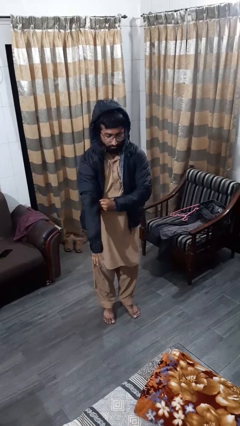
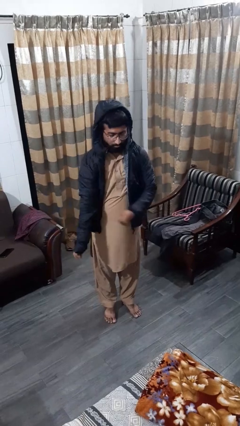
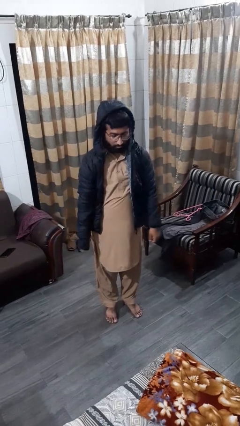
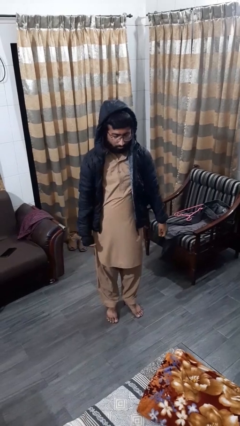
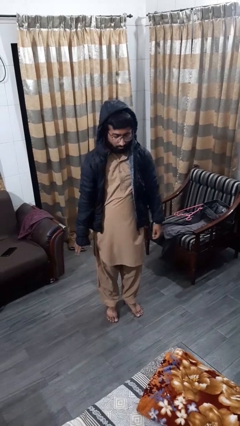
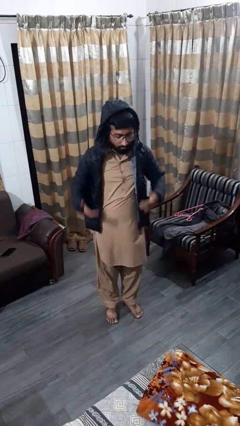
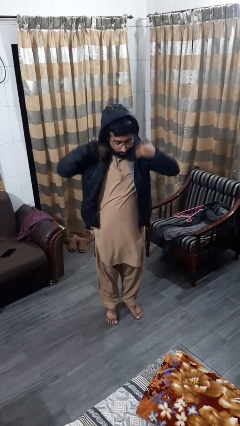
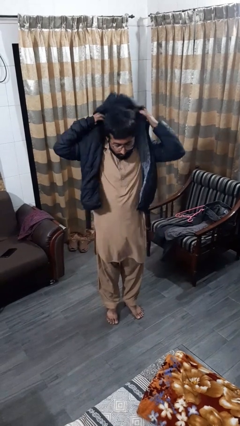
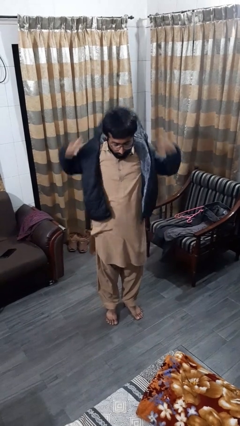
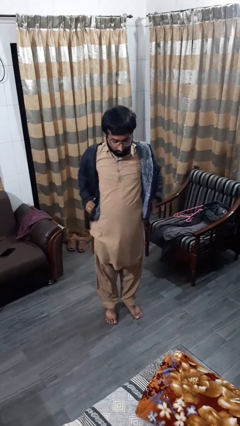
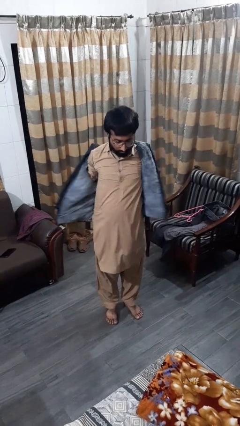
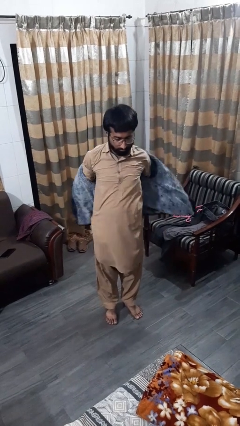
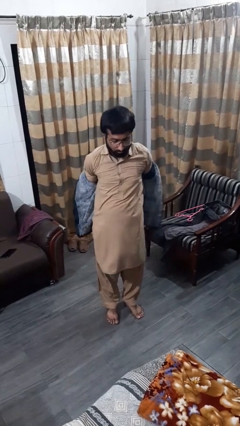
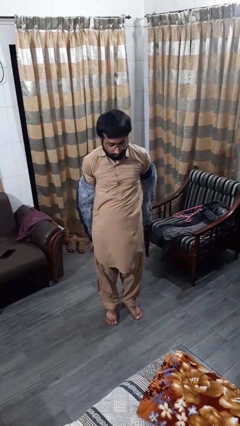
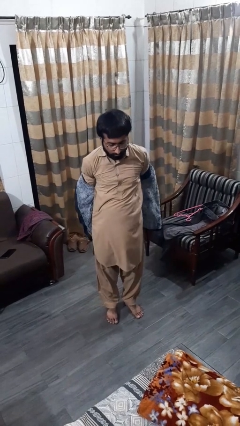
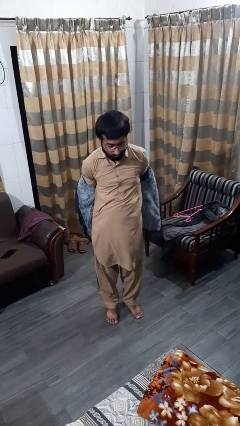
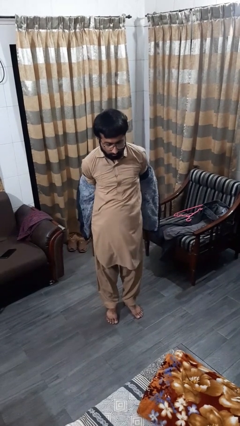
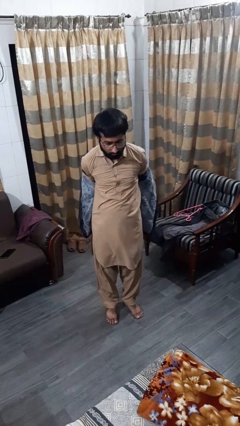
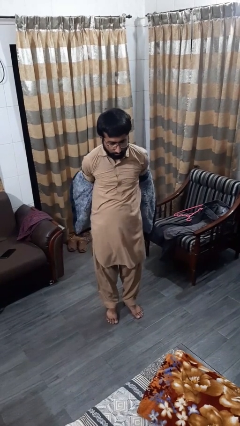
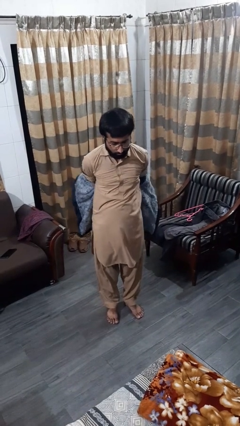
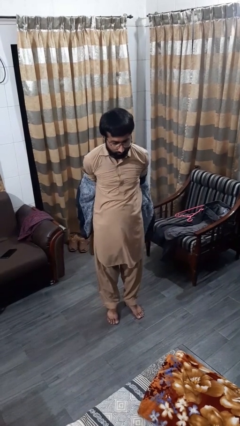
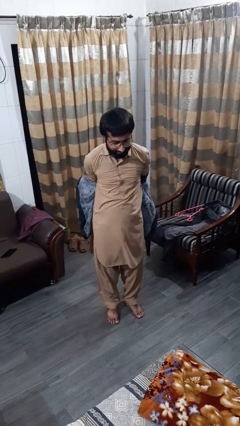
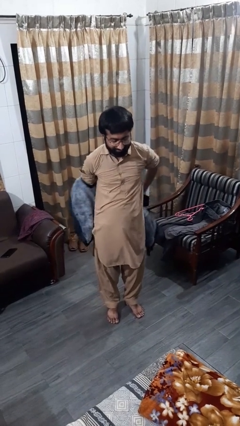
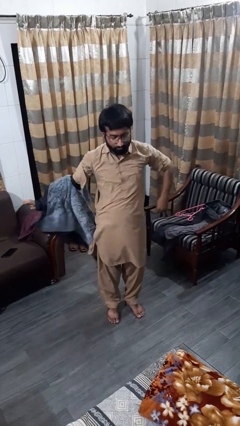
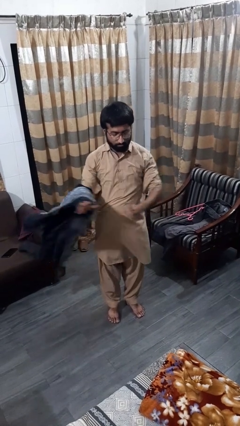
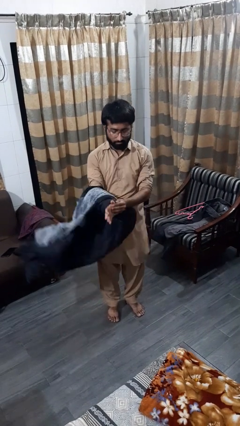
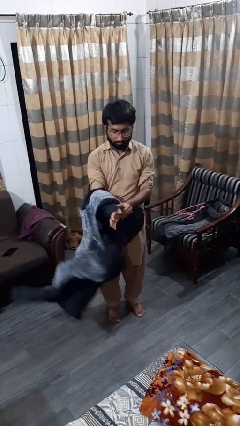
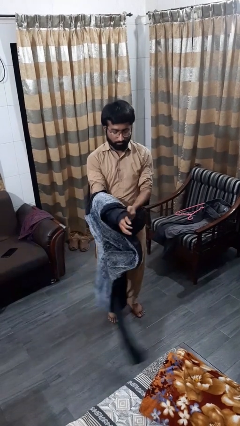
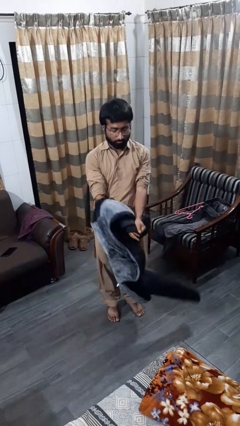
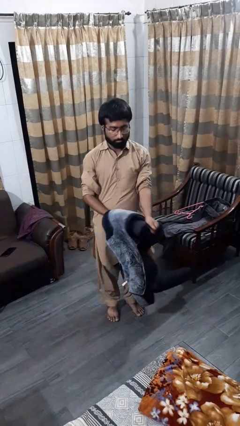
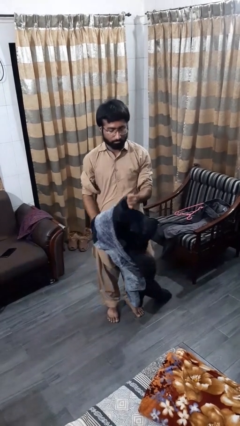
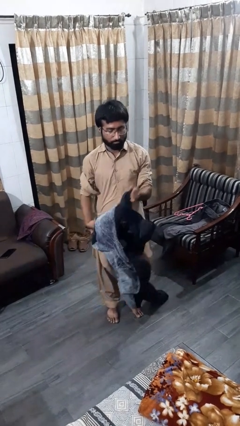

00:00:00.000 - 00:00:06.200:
person takes off hoodie

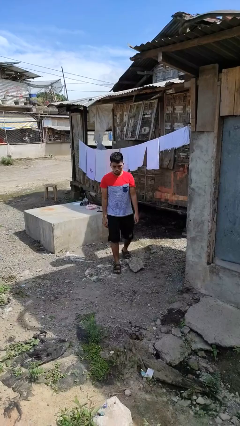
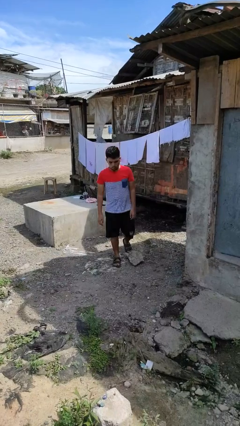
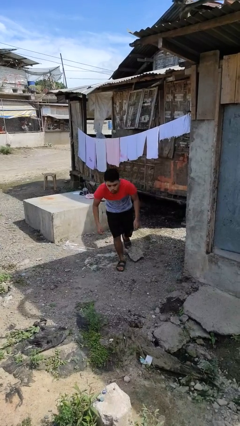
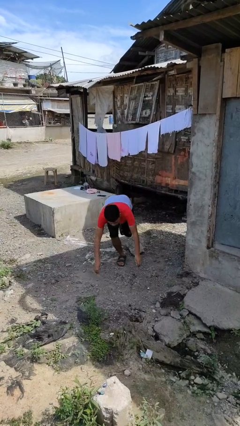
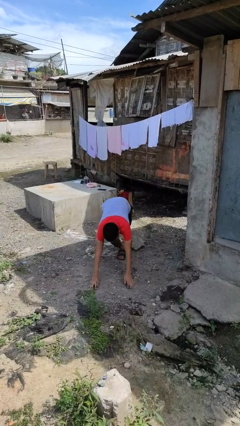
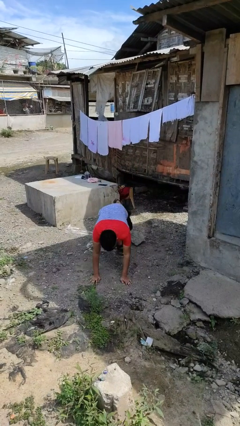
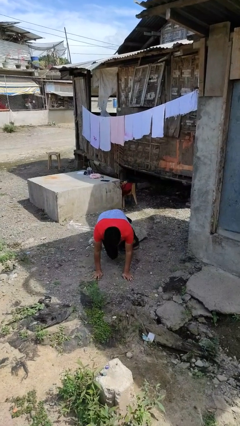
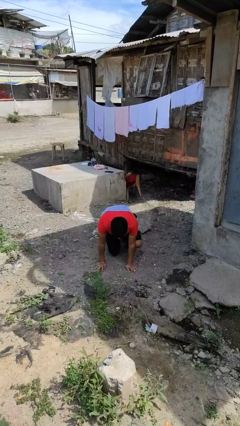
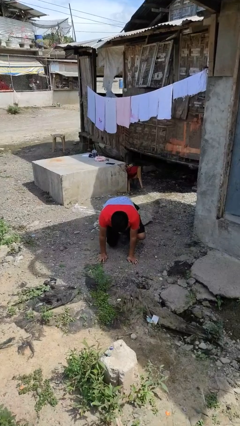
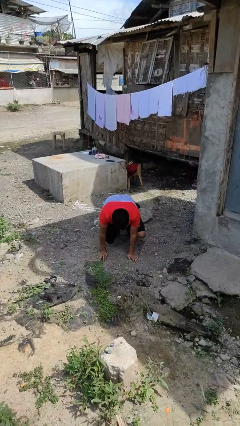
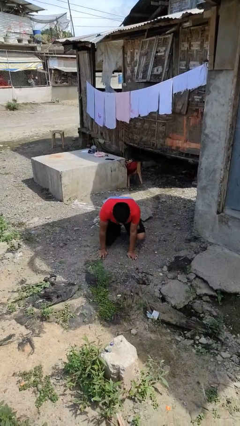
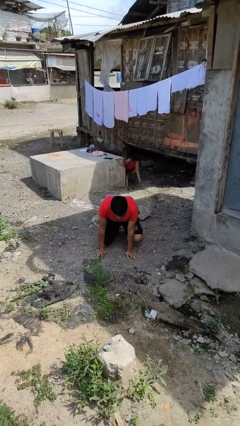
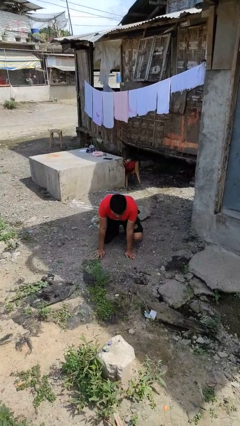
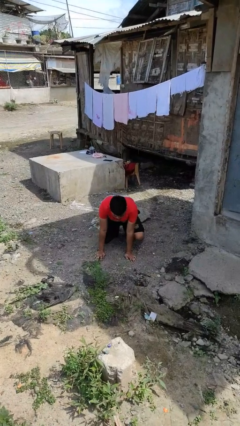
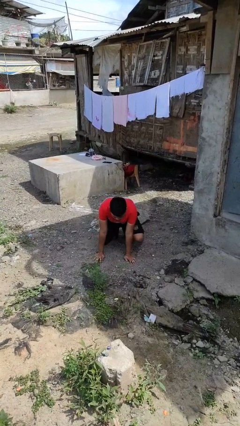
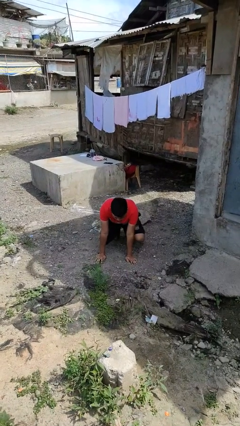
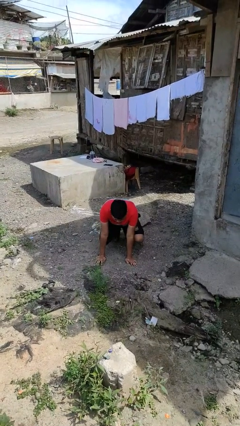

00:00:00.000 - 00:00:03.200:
person trips on object on floor

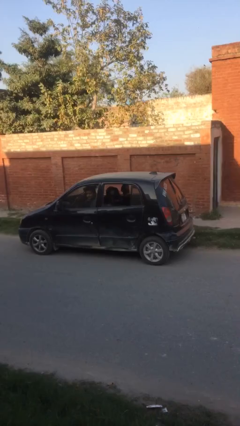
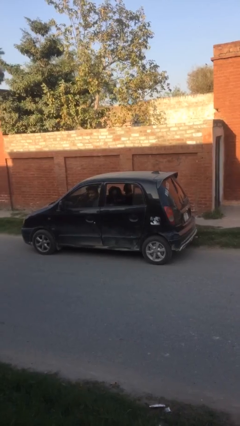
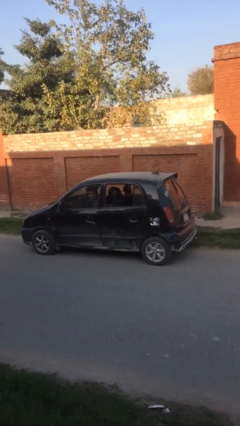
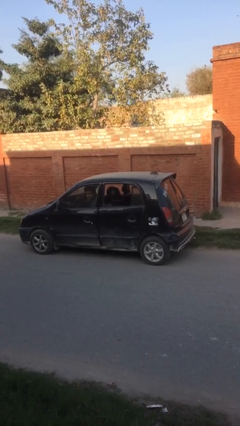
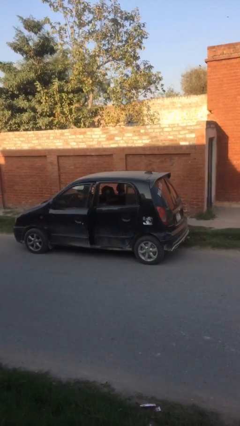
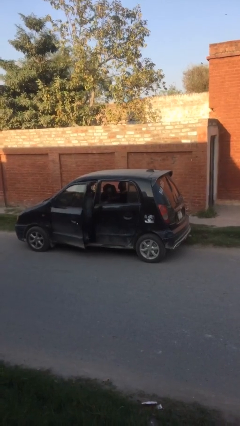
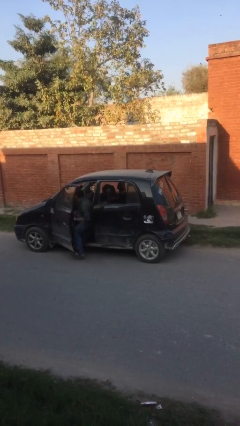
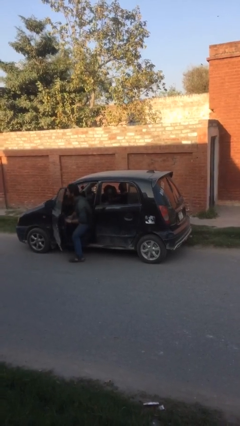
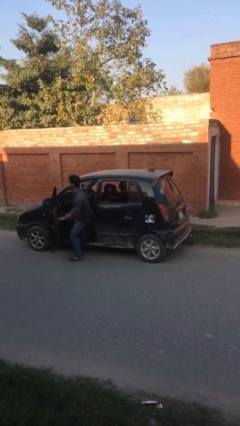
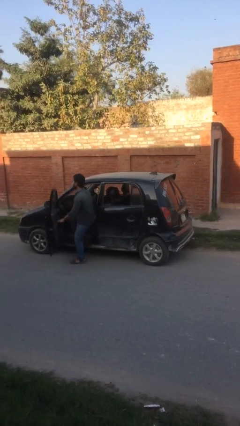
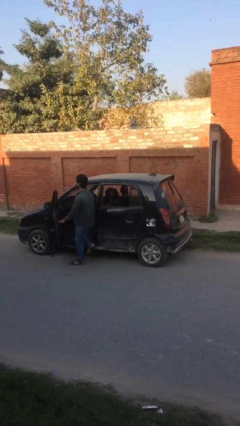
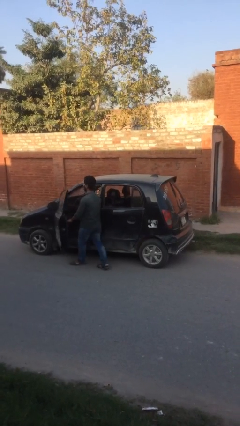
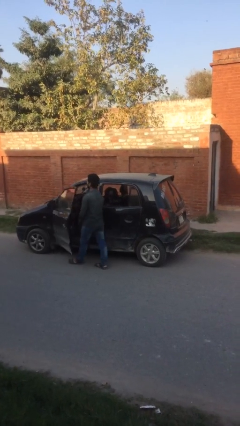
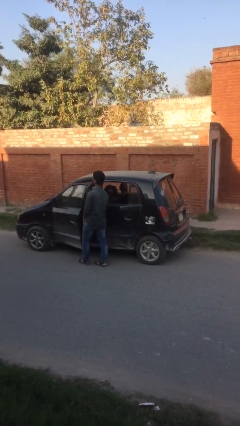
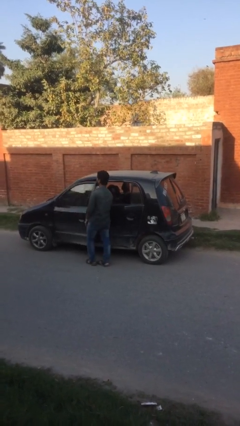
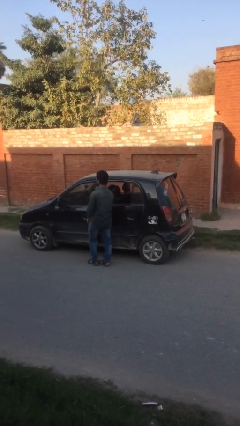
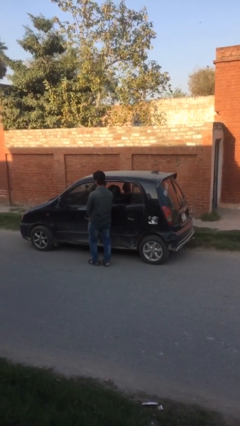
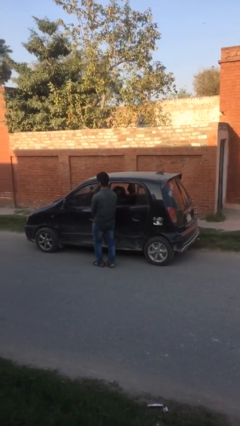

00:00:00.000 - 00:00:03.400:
car drops off person

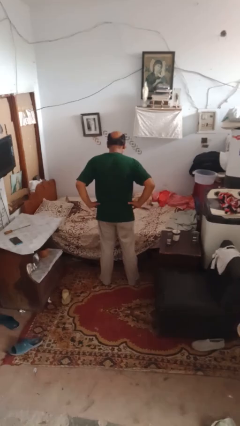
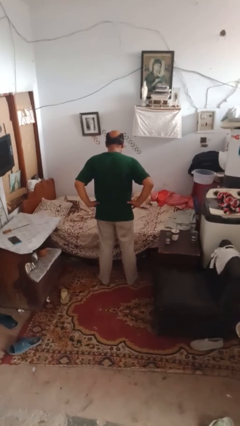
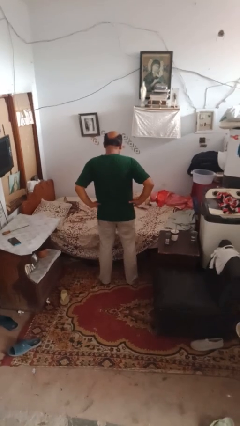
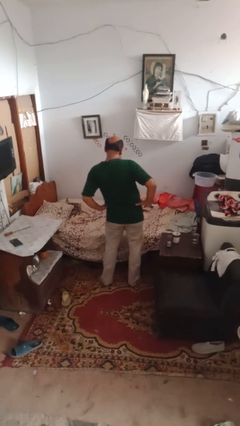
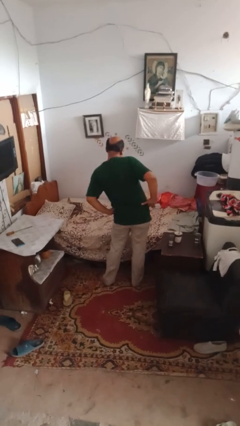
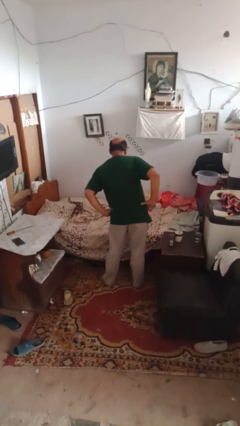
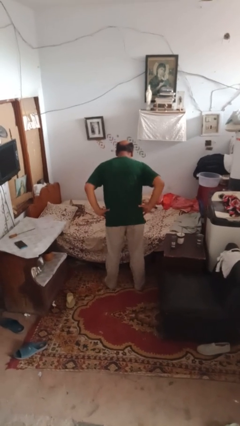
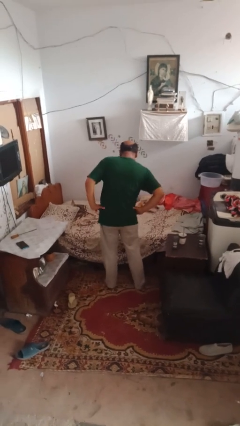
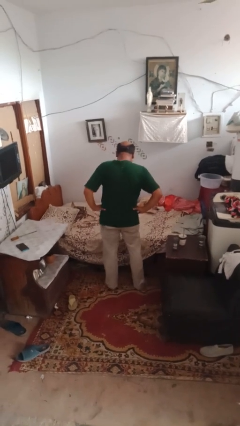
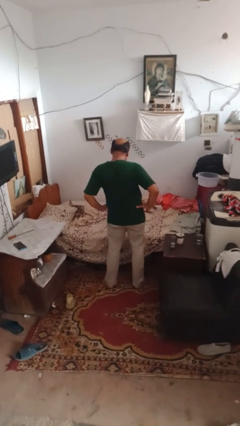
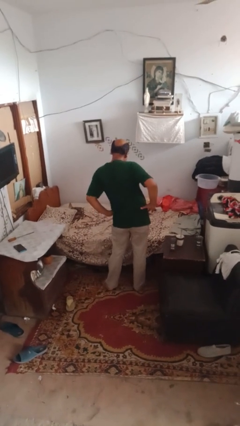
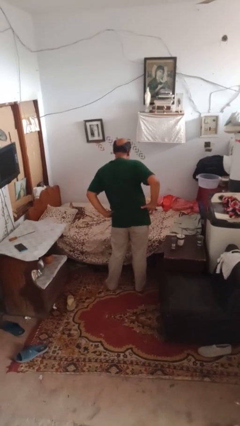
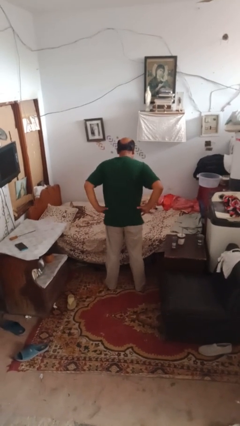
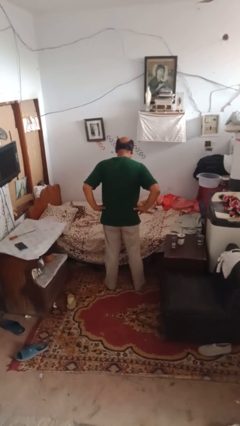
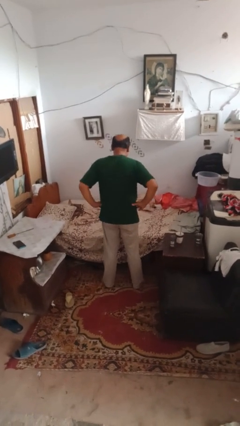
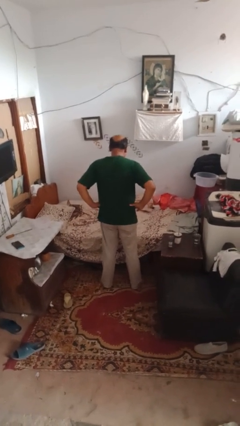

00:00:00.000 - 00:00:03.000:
person wiggles hips

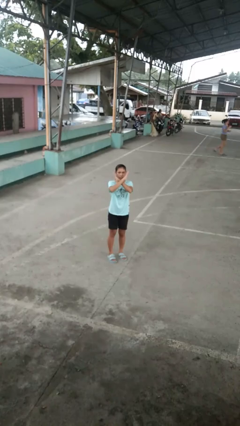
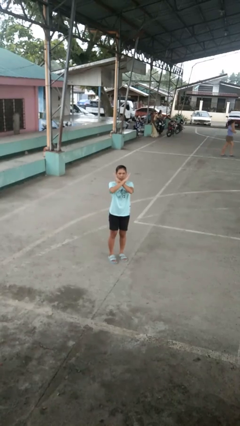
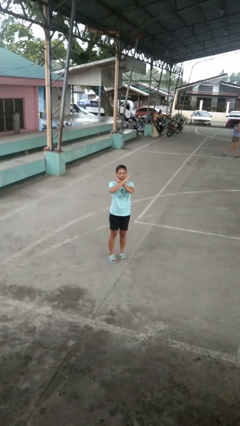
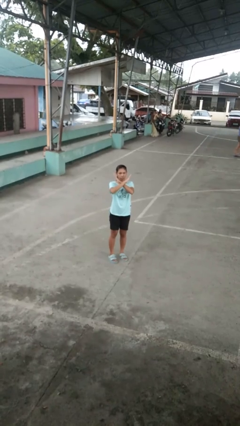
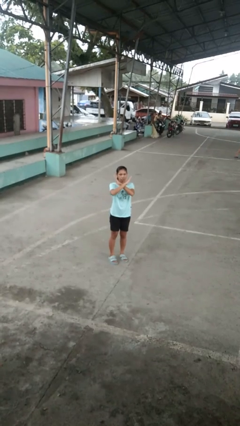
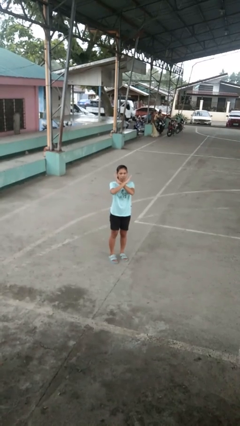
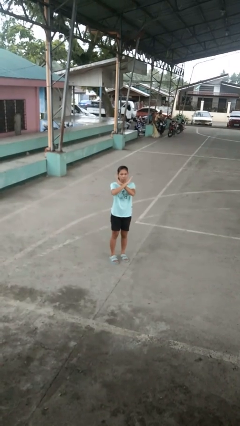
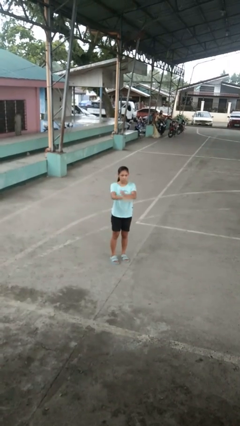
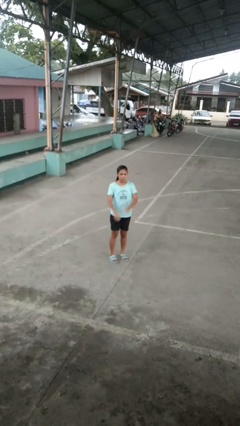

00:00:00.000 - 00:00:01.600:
person gestures arms x

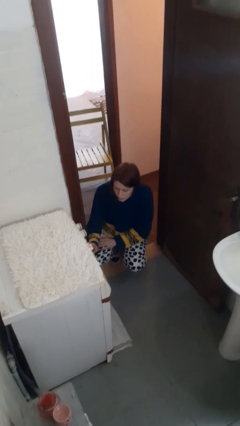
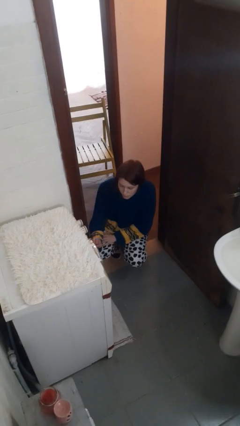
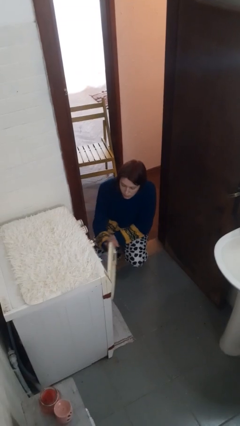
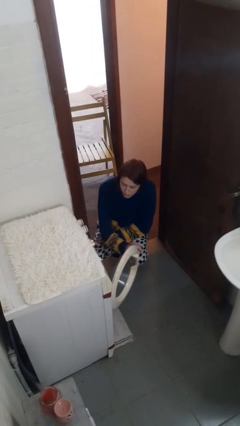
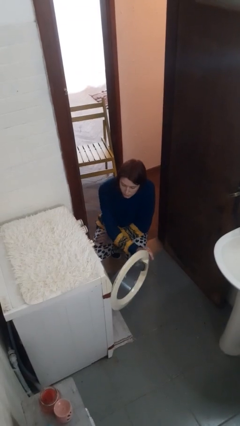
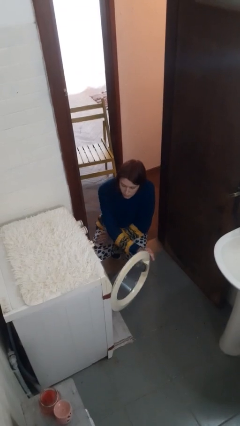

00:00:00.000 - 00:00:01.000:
person opens clothes washer
